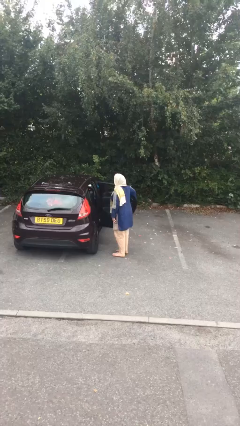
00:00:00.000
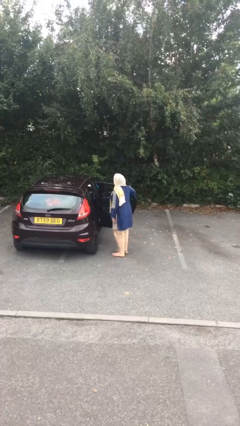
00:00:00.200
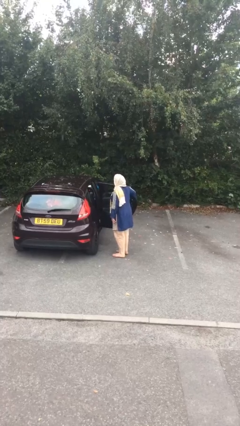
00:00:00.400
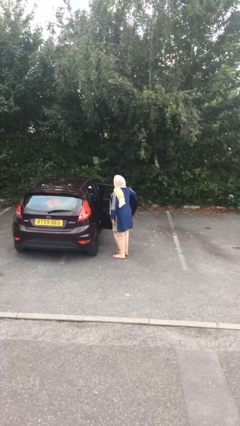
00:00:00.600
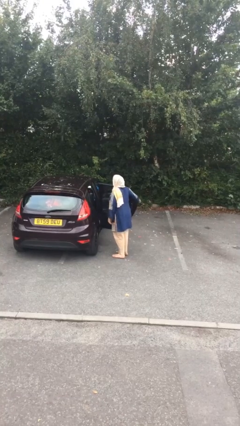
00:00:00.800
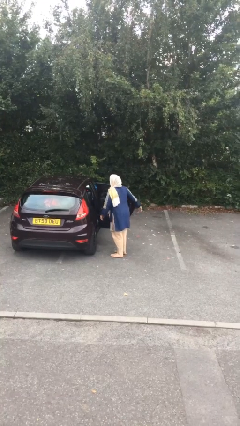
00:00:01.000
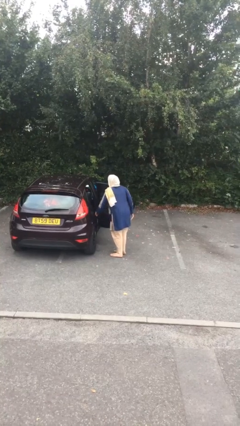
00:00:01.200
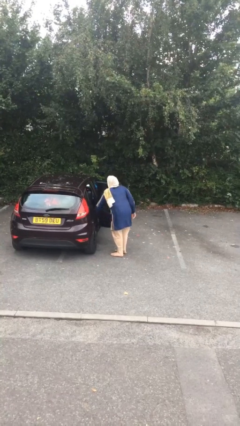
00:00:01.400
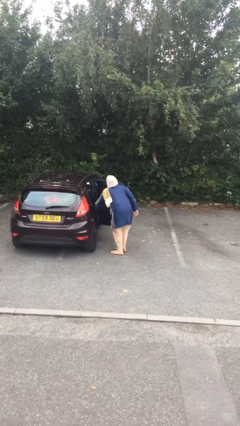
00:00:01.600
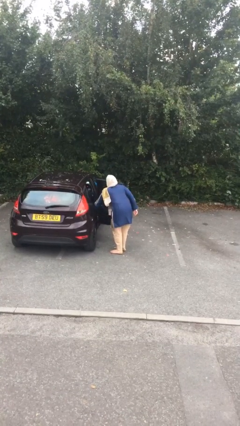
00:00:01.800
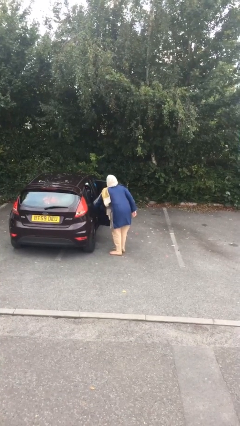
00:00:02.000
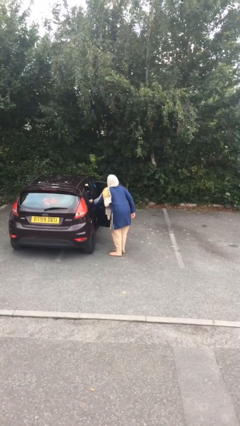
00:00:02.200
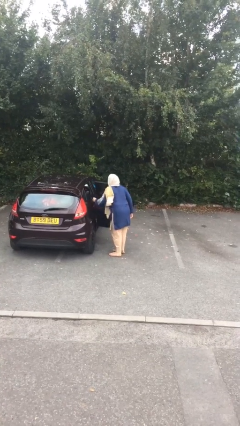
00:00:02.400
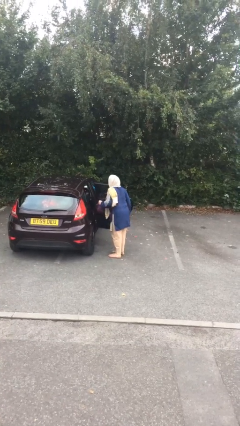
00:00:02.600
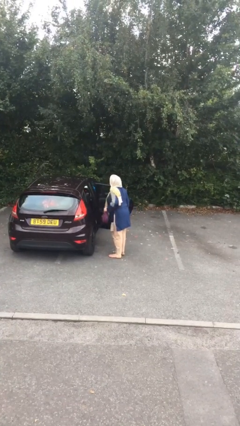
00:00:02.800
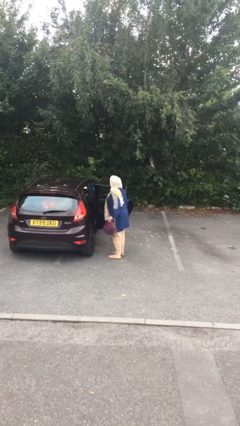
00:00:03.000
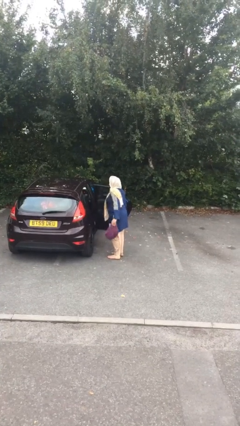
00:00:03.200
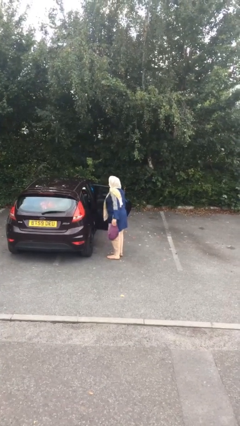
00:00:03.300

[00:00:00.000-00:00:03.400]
person unloads car

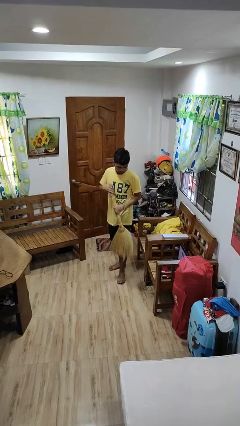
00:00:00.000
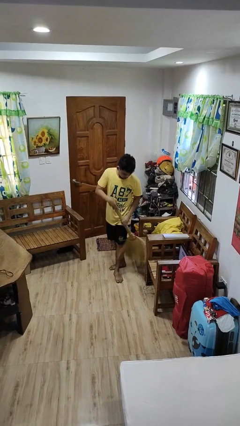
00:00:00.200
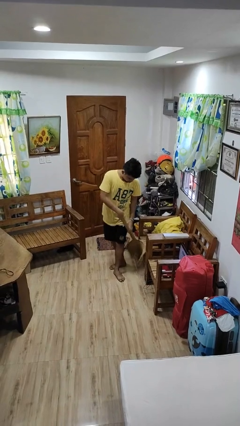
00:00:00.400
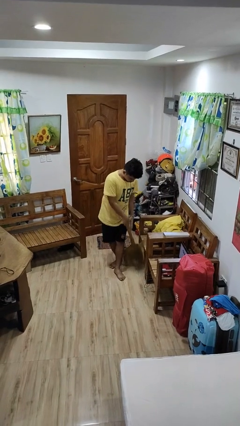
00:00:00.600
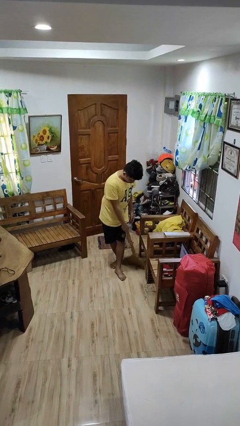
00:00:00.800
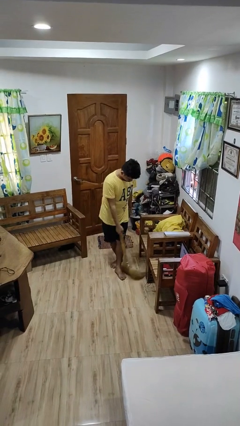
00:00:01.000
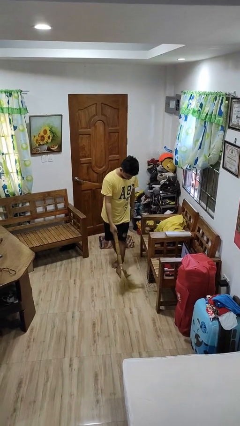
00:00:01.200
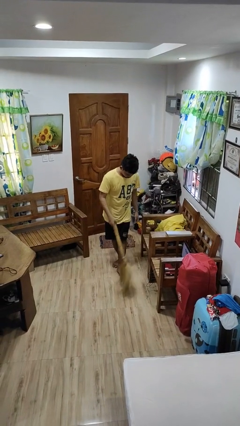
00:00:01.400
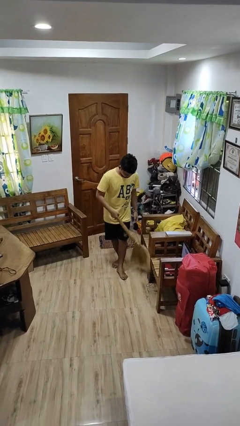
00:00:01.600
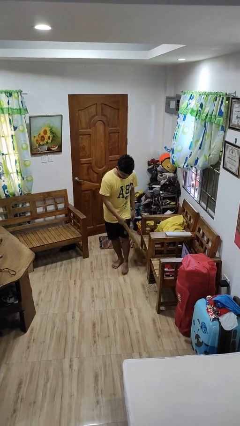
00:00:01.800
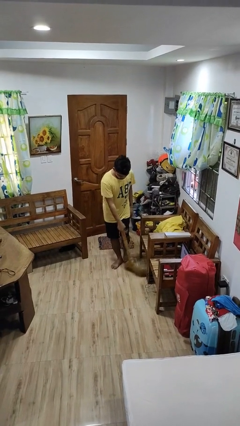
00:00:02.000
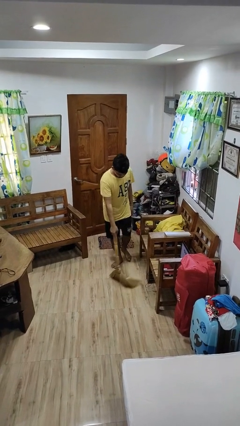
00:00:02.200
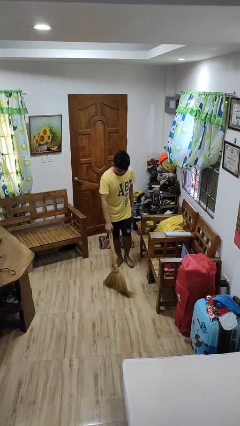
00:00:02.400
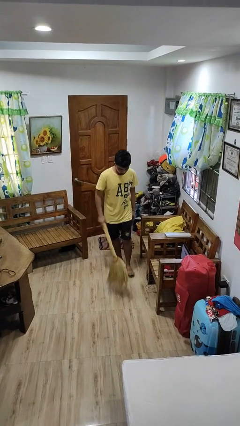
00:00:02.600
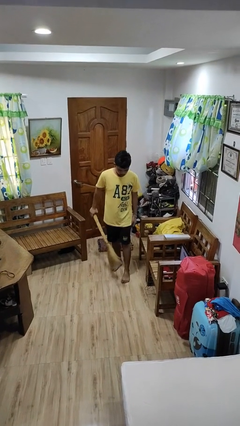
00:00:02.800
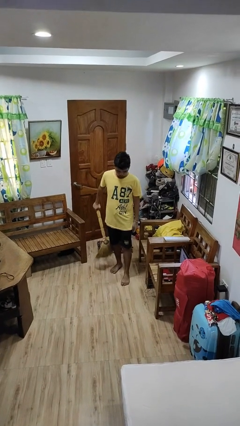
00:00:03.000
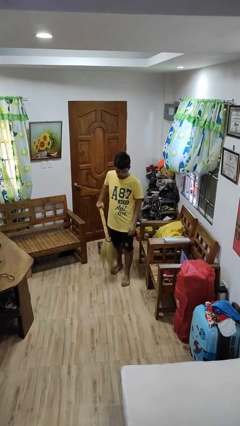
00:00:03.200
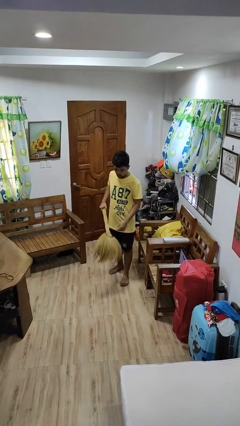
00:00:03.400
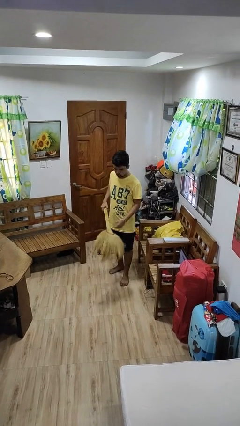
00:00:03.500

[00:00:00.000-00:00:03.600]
person sweeps floor

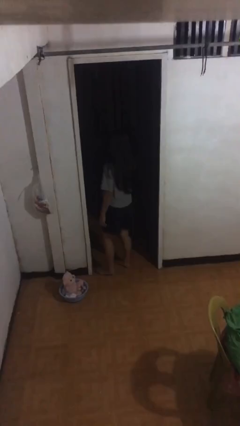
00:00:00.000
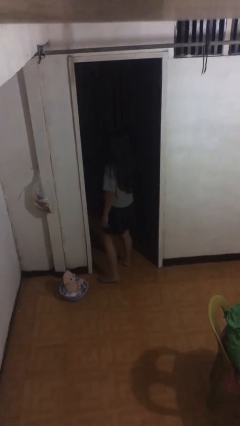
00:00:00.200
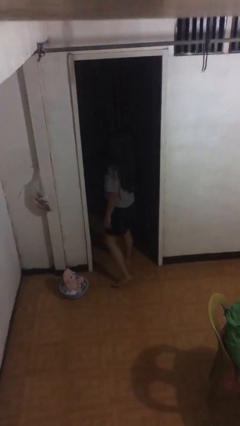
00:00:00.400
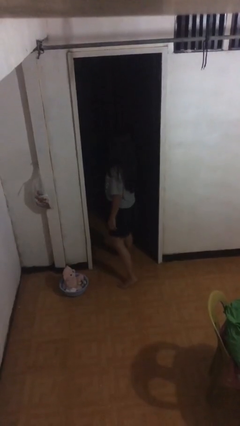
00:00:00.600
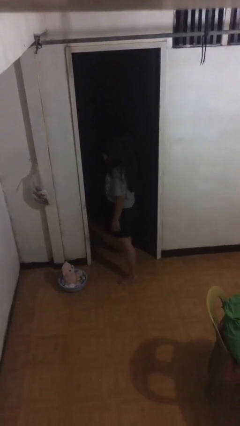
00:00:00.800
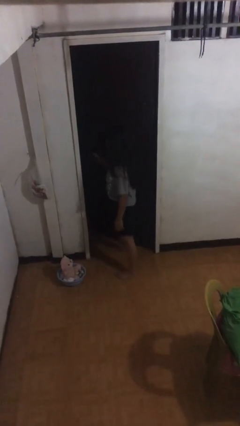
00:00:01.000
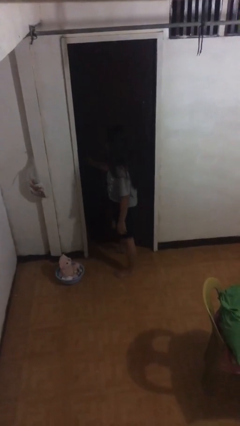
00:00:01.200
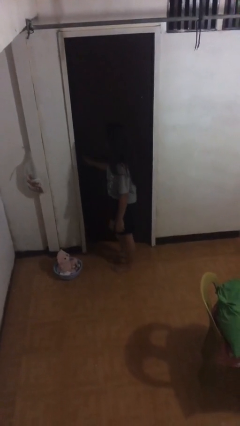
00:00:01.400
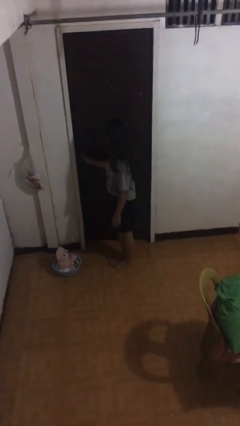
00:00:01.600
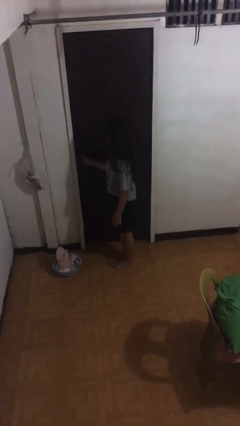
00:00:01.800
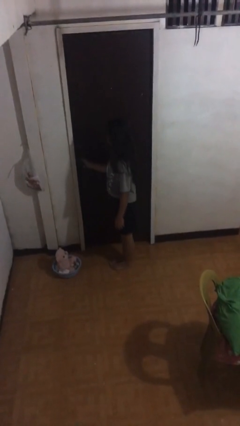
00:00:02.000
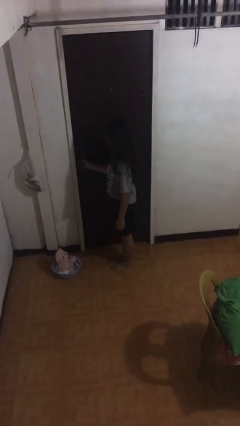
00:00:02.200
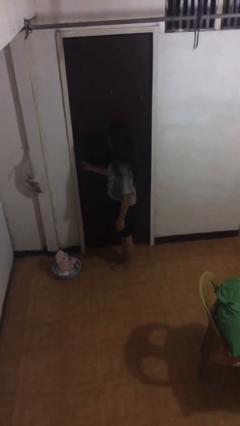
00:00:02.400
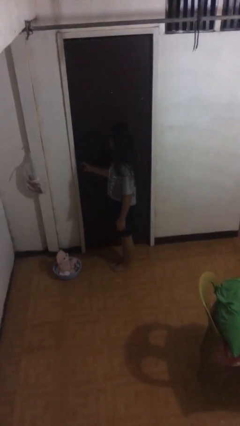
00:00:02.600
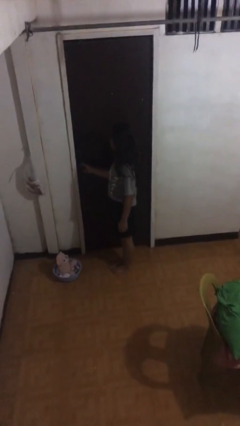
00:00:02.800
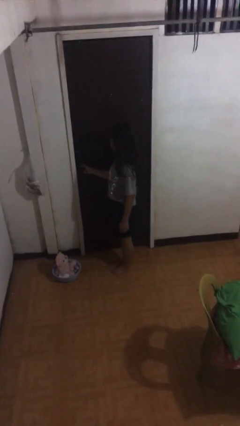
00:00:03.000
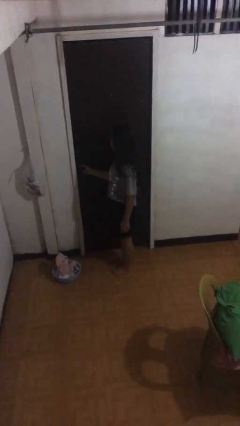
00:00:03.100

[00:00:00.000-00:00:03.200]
person closes facility door

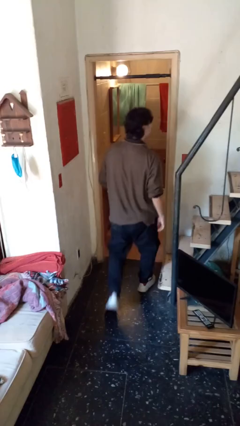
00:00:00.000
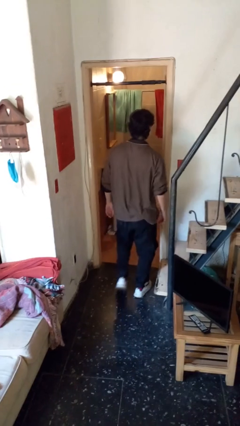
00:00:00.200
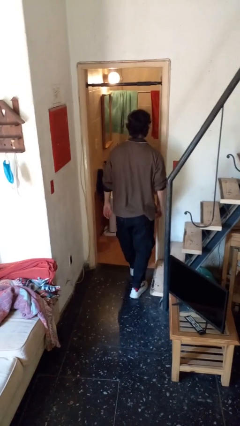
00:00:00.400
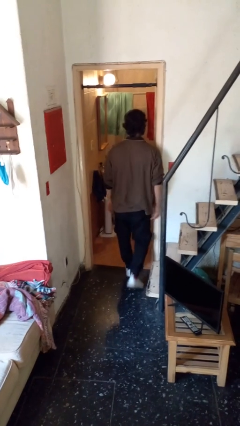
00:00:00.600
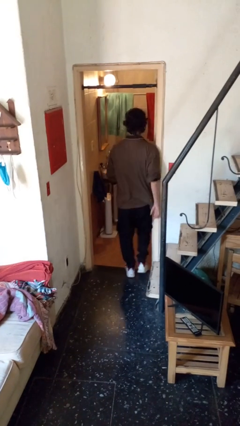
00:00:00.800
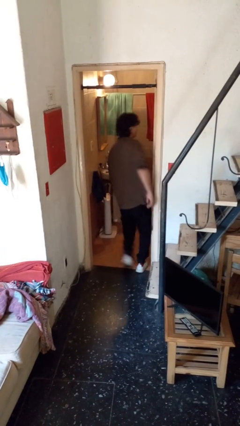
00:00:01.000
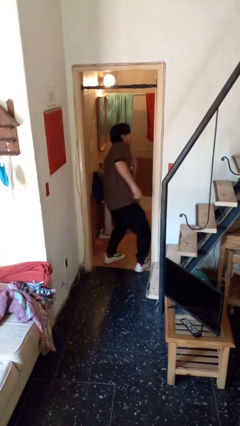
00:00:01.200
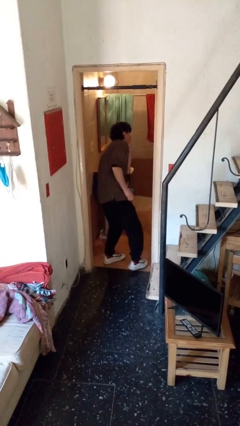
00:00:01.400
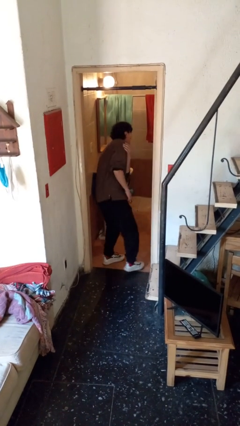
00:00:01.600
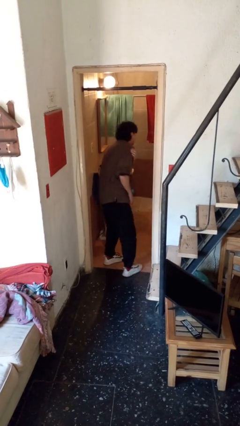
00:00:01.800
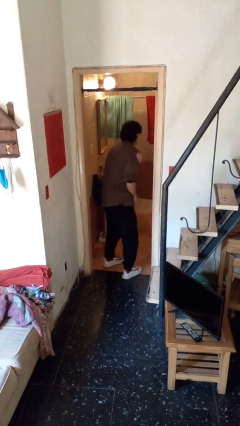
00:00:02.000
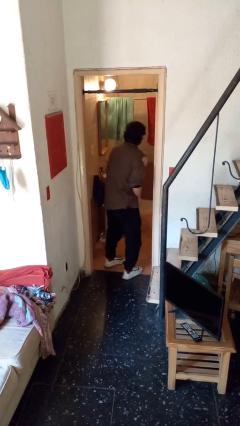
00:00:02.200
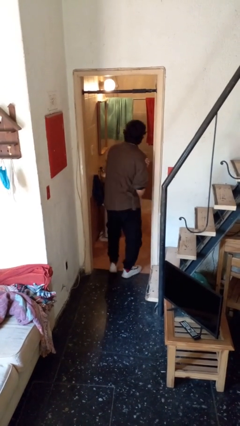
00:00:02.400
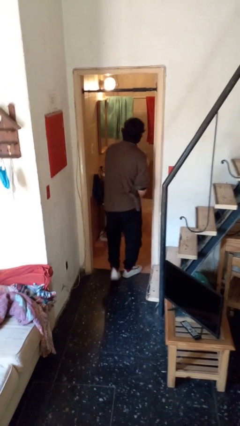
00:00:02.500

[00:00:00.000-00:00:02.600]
person bumps into wall

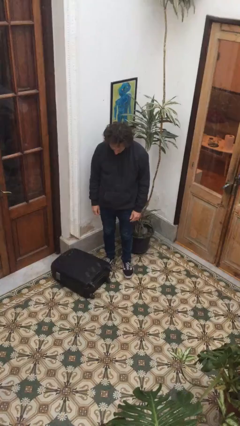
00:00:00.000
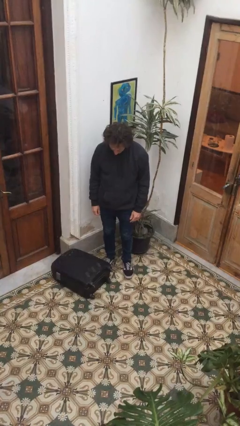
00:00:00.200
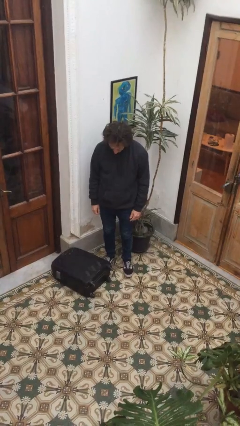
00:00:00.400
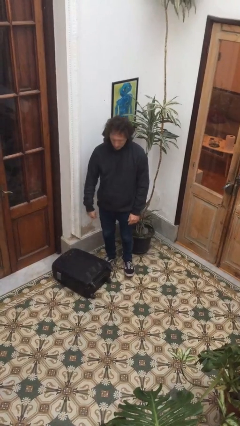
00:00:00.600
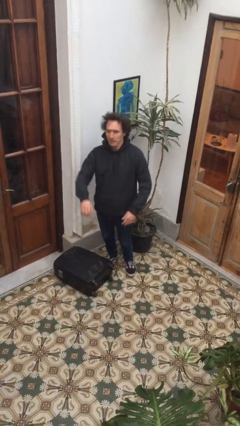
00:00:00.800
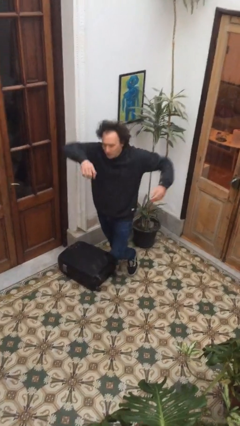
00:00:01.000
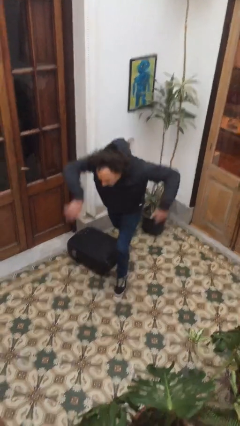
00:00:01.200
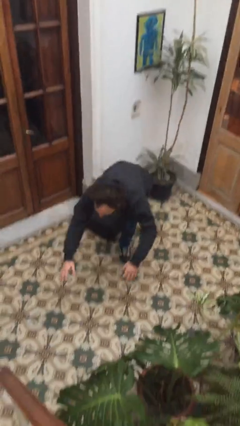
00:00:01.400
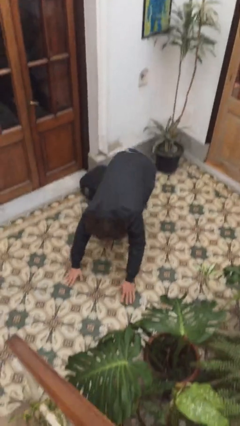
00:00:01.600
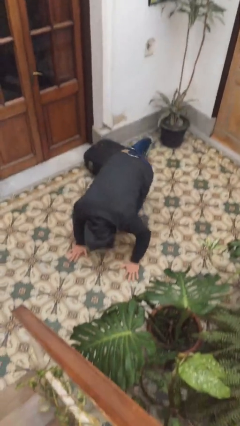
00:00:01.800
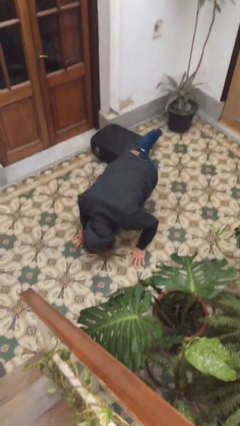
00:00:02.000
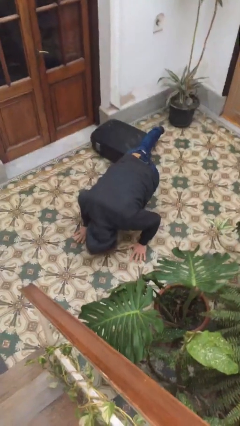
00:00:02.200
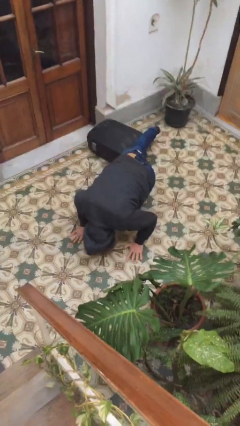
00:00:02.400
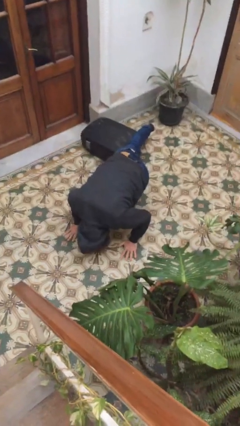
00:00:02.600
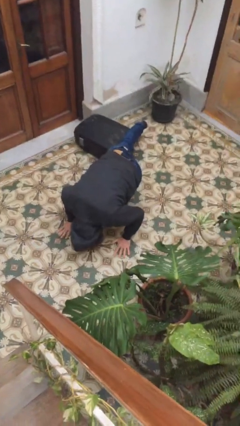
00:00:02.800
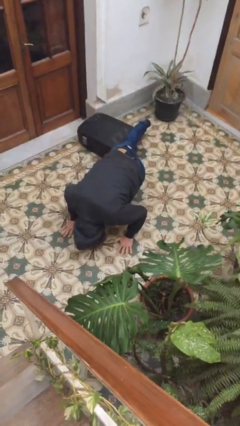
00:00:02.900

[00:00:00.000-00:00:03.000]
person trips on object on floor

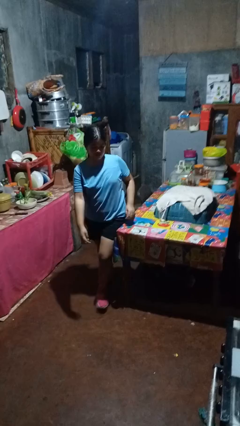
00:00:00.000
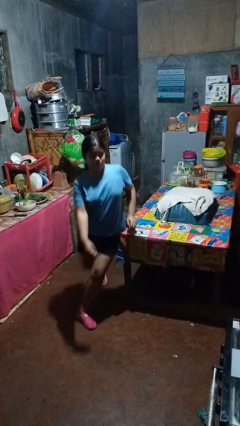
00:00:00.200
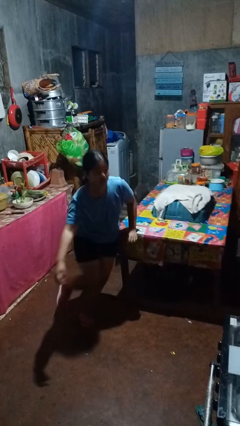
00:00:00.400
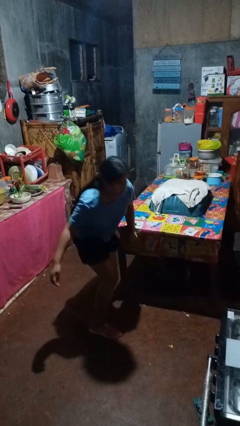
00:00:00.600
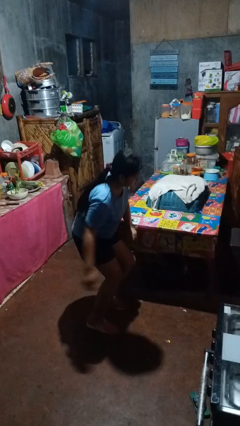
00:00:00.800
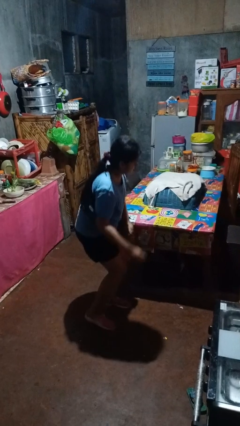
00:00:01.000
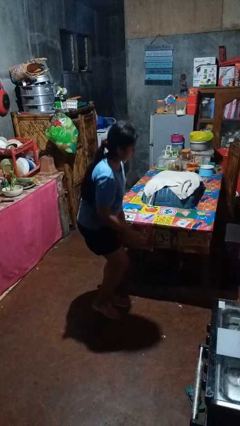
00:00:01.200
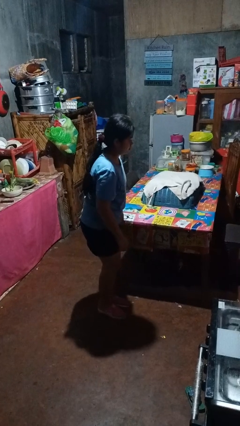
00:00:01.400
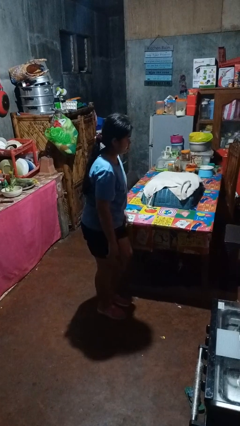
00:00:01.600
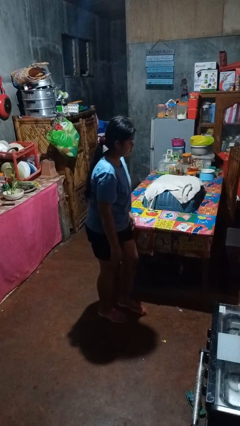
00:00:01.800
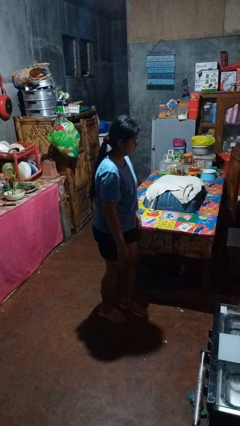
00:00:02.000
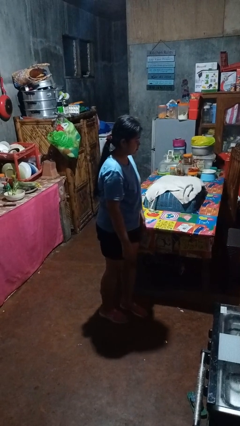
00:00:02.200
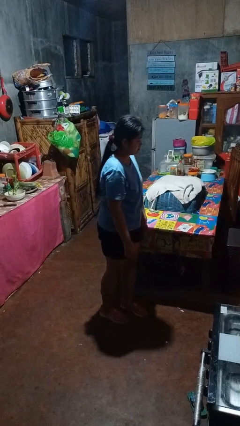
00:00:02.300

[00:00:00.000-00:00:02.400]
person bumps into table
